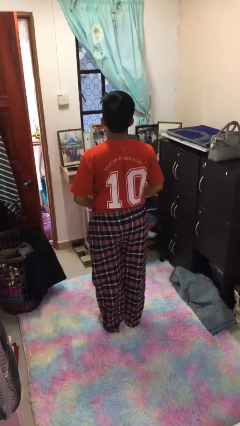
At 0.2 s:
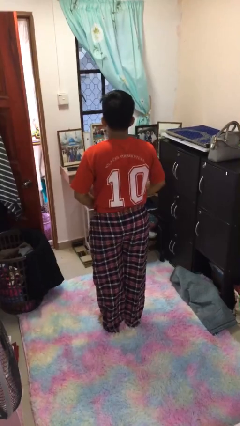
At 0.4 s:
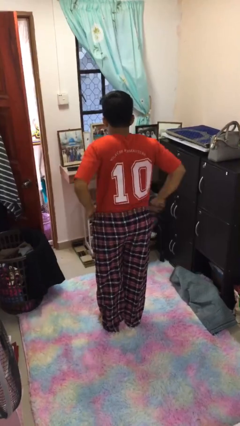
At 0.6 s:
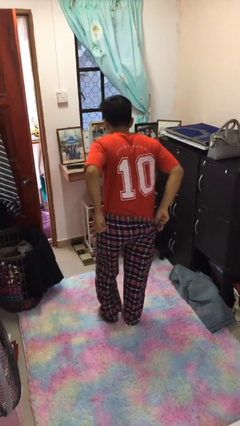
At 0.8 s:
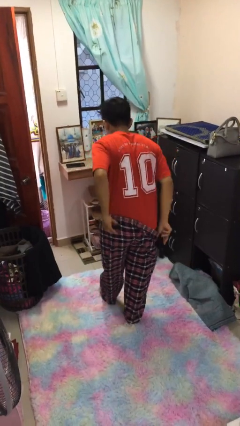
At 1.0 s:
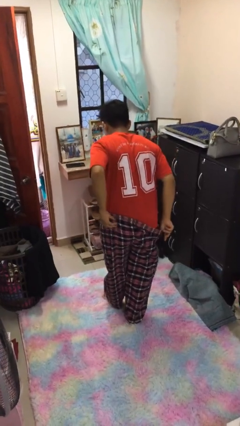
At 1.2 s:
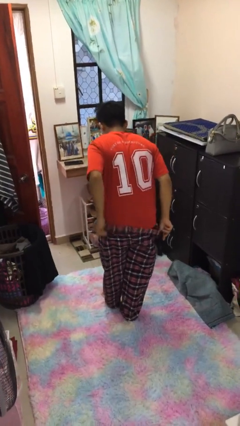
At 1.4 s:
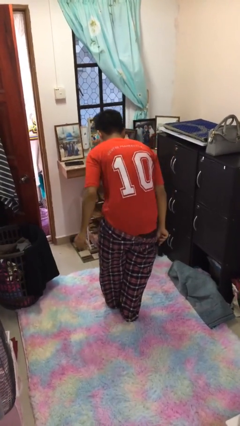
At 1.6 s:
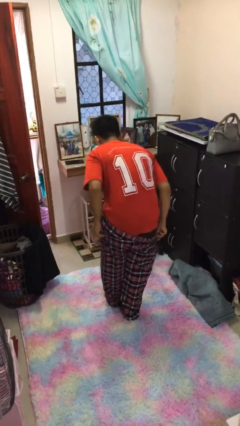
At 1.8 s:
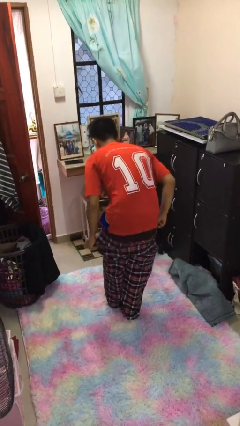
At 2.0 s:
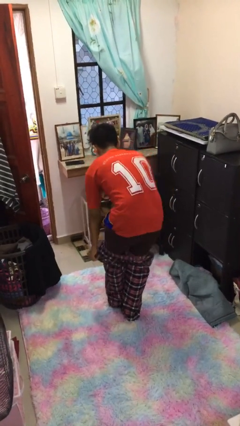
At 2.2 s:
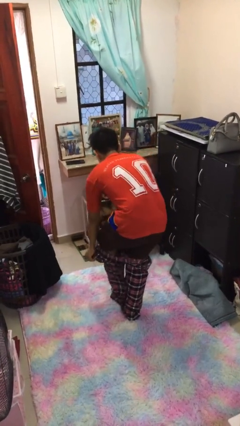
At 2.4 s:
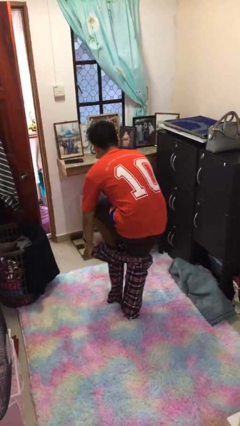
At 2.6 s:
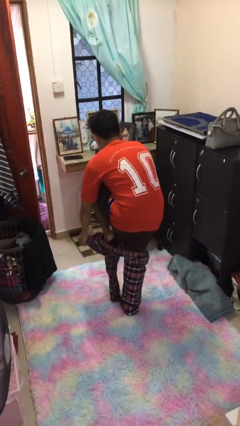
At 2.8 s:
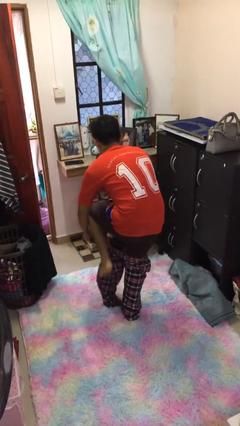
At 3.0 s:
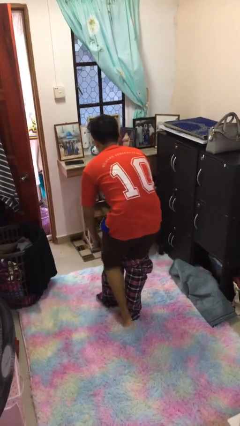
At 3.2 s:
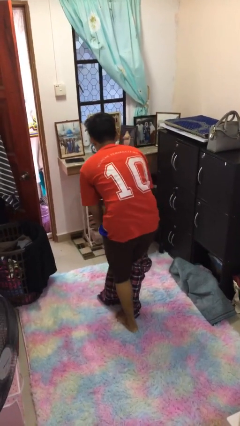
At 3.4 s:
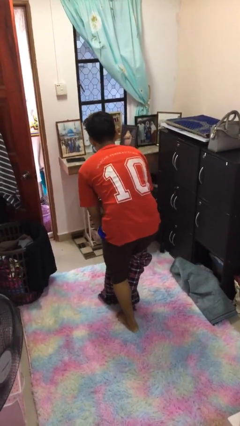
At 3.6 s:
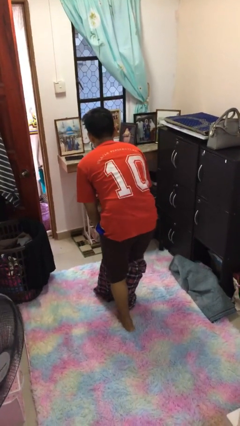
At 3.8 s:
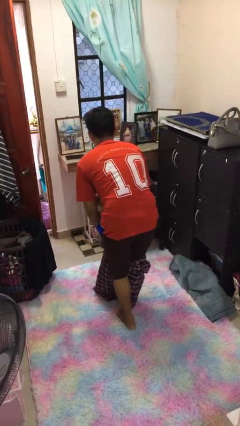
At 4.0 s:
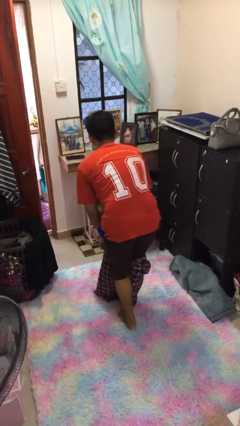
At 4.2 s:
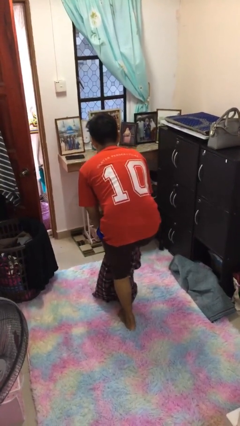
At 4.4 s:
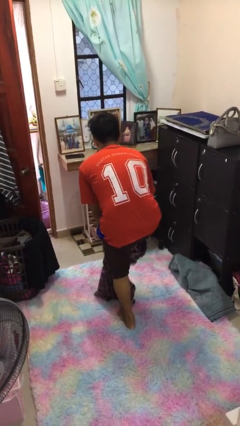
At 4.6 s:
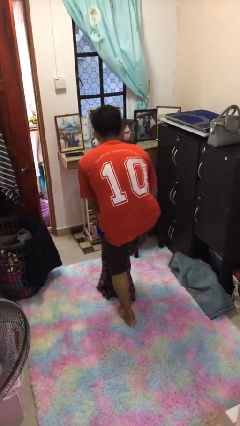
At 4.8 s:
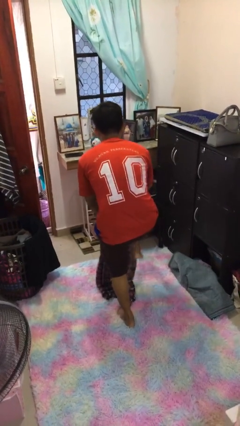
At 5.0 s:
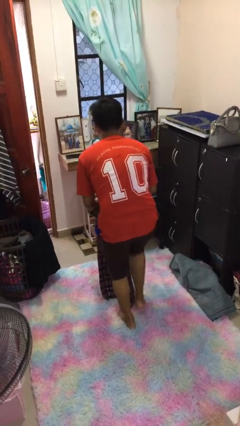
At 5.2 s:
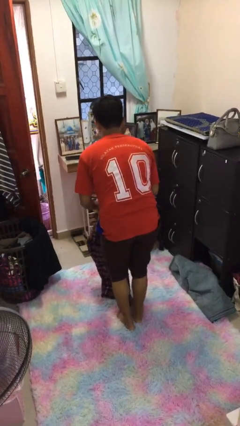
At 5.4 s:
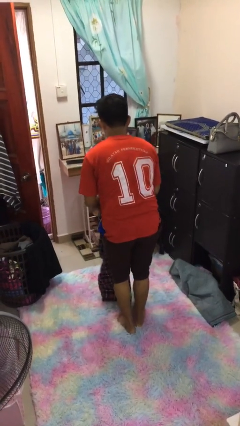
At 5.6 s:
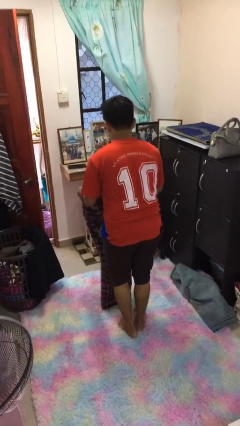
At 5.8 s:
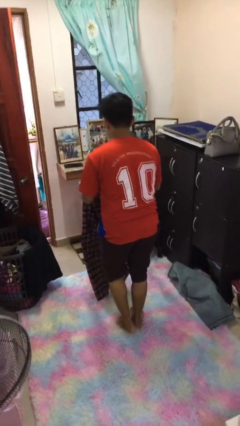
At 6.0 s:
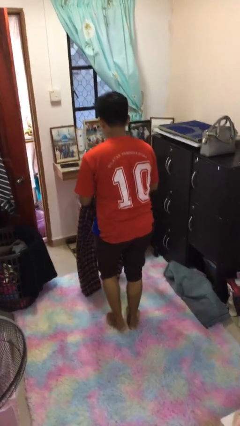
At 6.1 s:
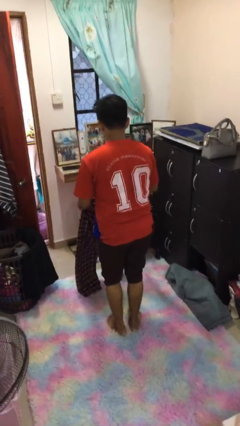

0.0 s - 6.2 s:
person takes off pants

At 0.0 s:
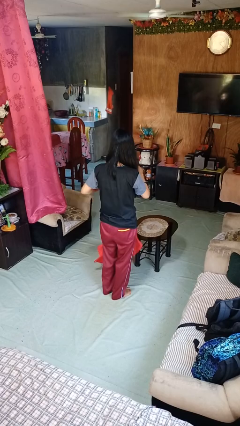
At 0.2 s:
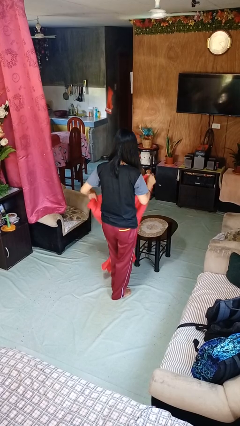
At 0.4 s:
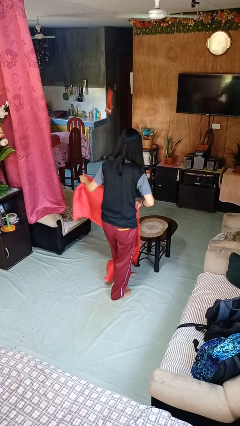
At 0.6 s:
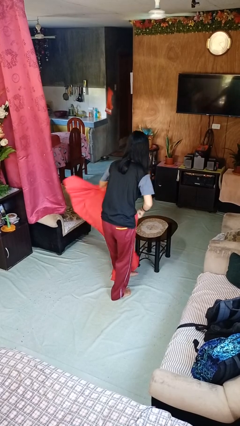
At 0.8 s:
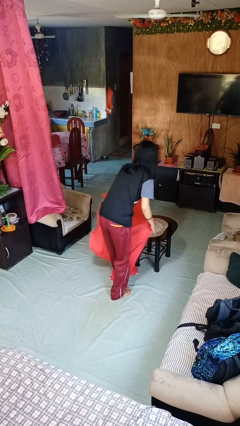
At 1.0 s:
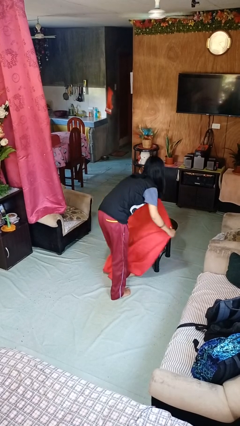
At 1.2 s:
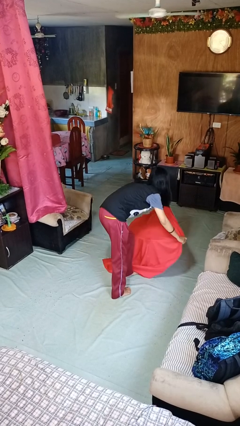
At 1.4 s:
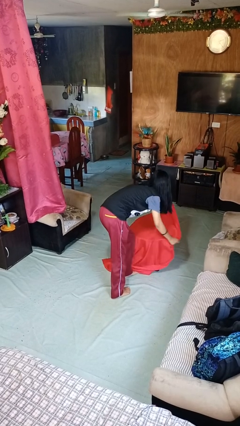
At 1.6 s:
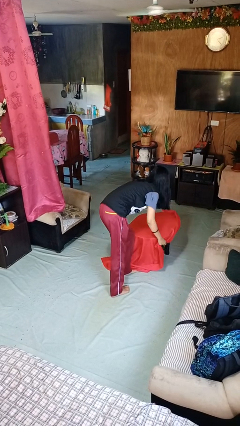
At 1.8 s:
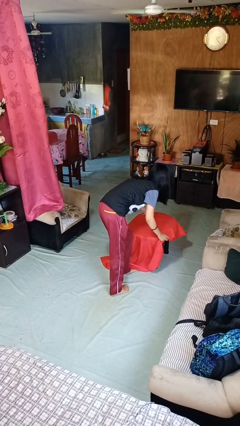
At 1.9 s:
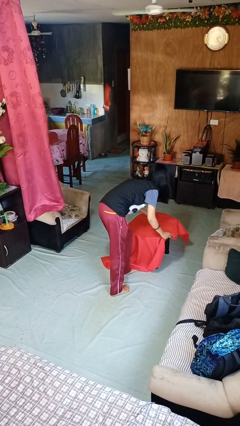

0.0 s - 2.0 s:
person spreads tablecloth

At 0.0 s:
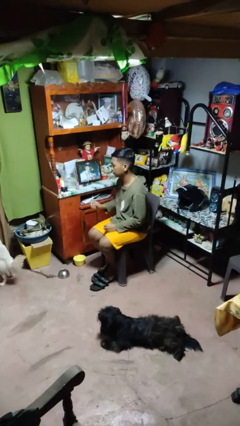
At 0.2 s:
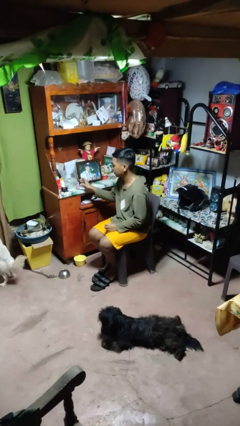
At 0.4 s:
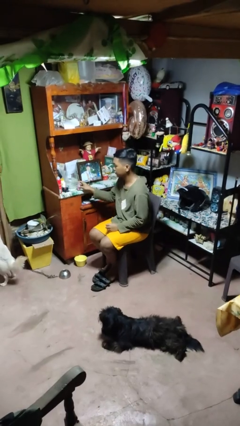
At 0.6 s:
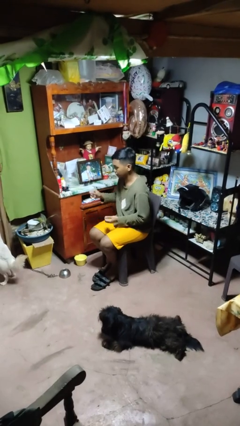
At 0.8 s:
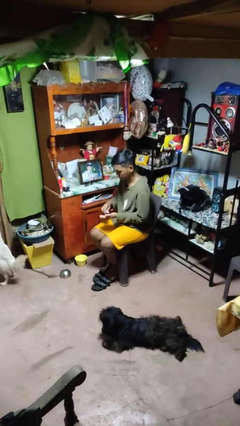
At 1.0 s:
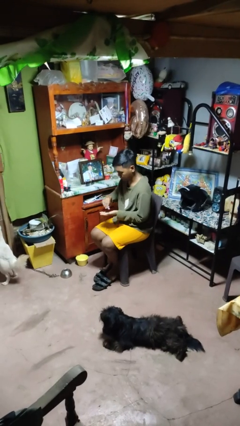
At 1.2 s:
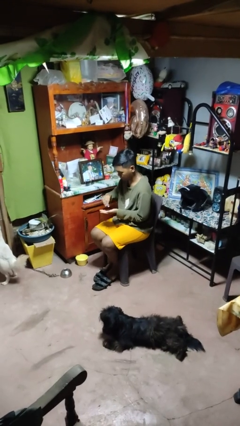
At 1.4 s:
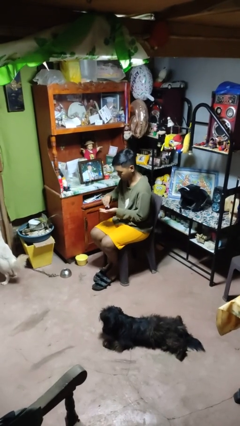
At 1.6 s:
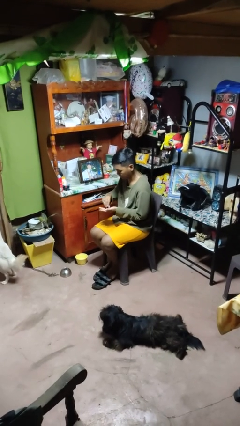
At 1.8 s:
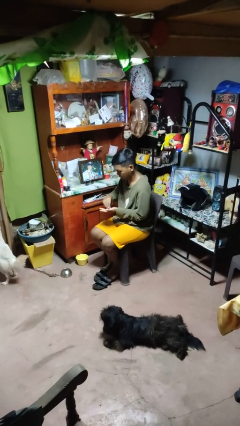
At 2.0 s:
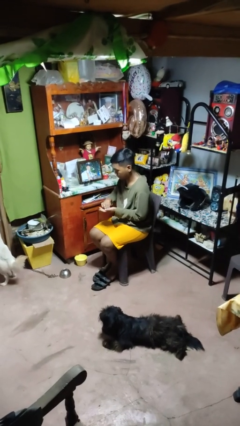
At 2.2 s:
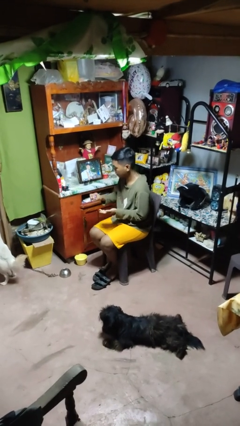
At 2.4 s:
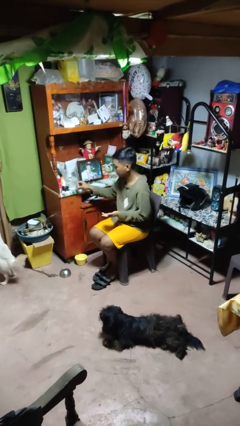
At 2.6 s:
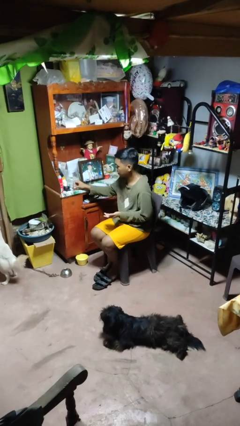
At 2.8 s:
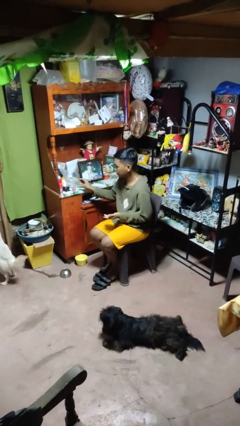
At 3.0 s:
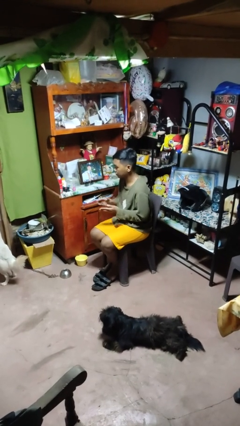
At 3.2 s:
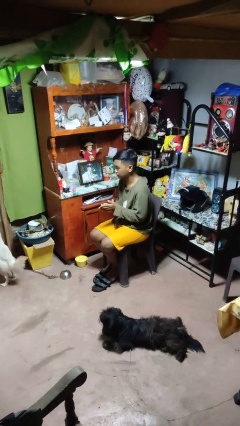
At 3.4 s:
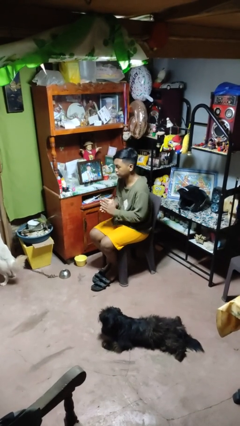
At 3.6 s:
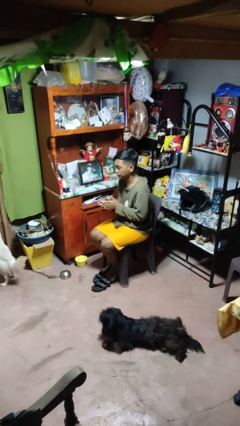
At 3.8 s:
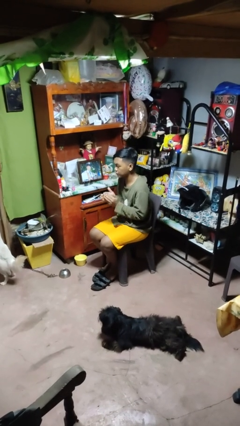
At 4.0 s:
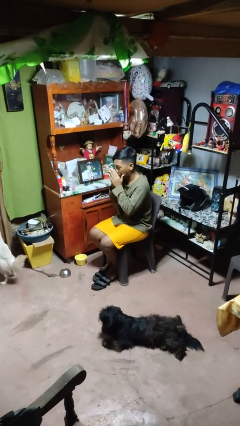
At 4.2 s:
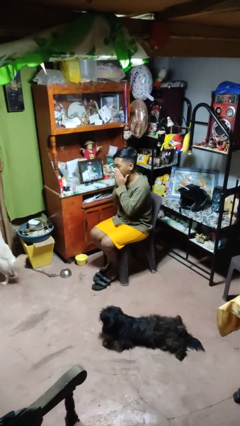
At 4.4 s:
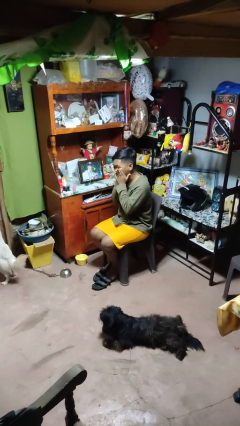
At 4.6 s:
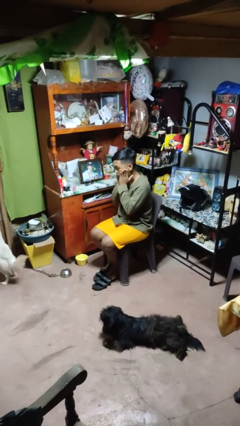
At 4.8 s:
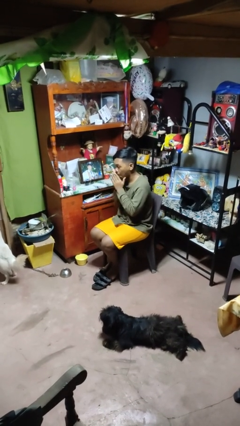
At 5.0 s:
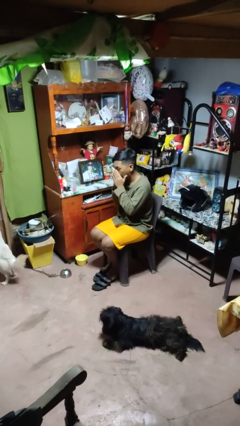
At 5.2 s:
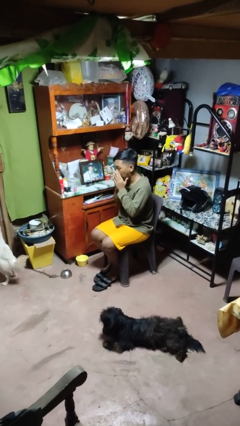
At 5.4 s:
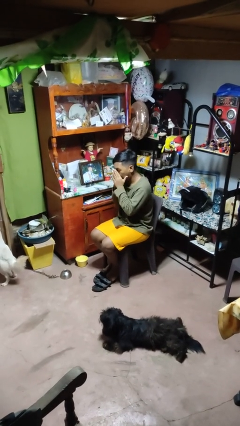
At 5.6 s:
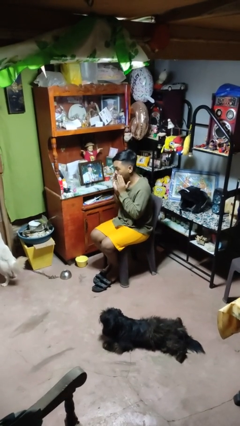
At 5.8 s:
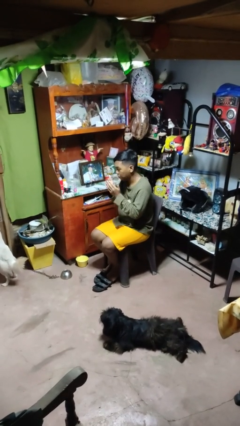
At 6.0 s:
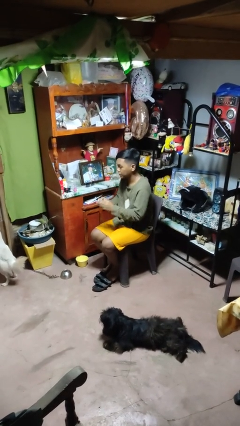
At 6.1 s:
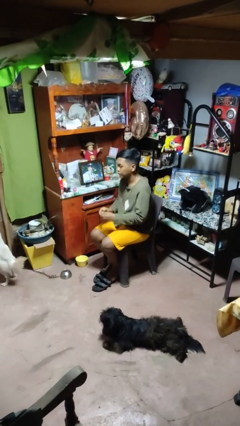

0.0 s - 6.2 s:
person applies facial moisturizer

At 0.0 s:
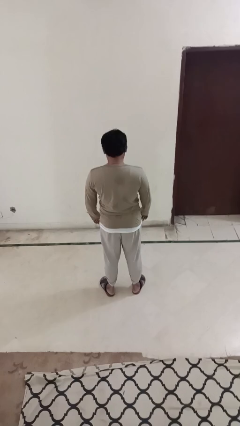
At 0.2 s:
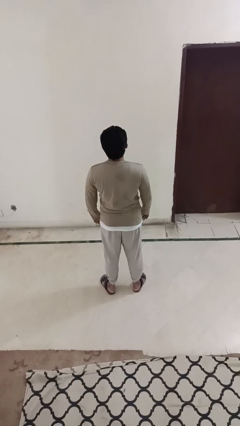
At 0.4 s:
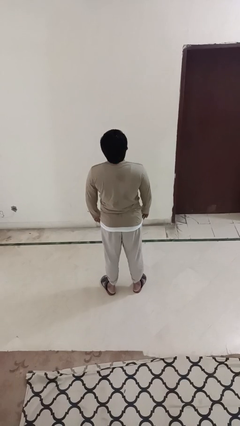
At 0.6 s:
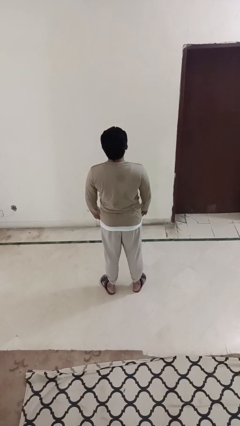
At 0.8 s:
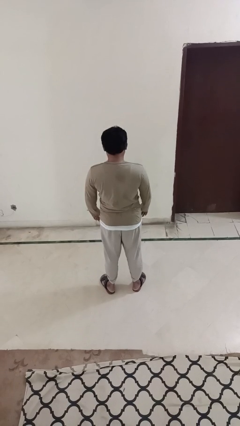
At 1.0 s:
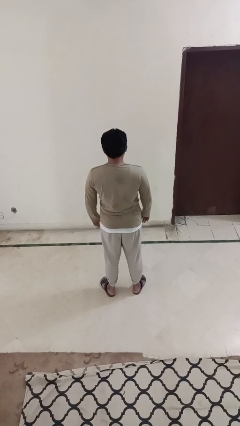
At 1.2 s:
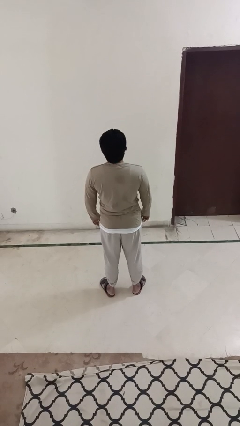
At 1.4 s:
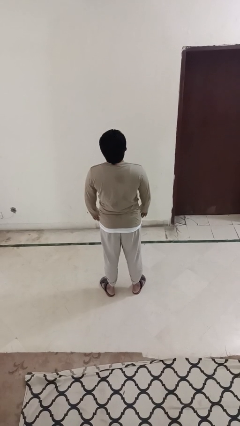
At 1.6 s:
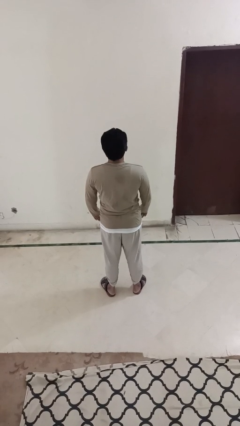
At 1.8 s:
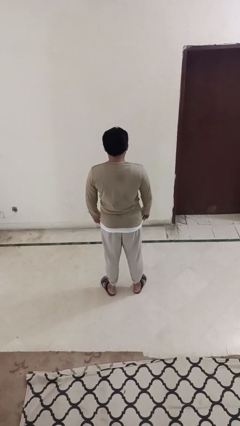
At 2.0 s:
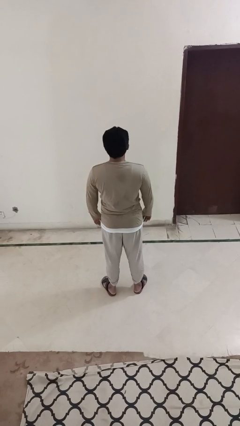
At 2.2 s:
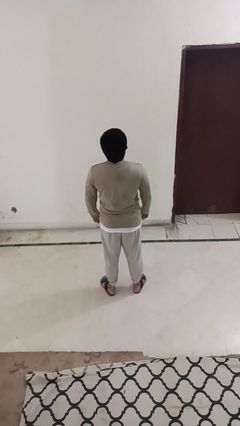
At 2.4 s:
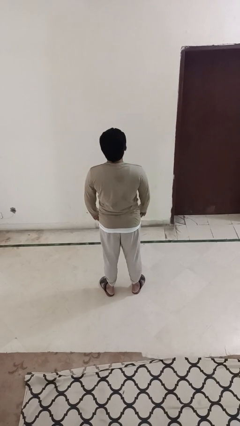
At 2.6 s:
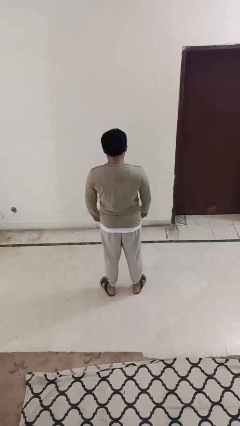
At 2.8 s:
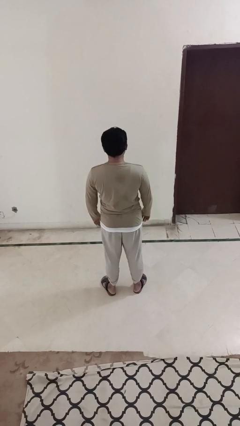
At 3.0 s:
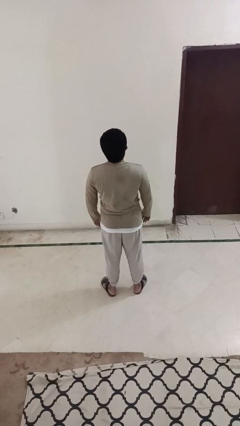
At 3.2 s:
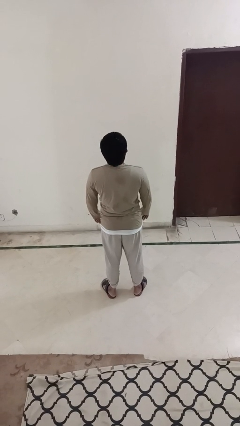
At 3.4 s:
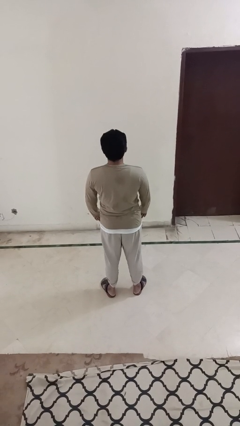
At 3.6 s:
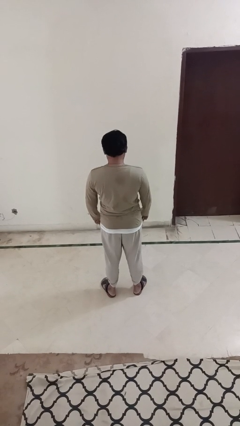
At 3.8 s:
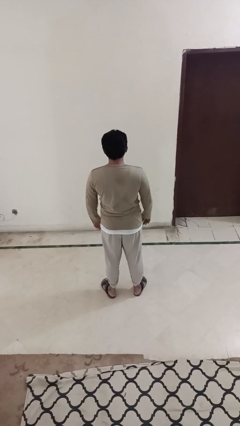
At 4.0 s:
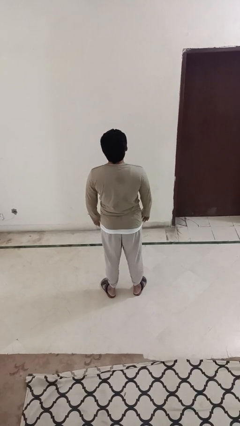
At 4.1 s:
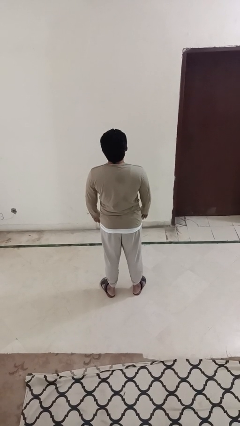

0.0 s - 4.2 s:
person nods head
